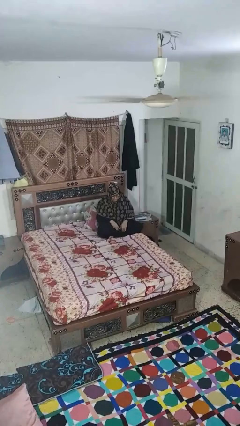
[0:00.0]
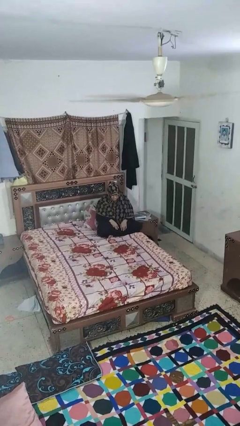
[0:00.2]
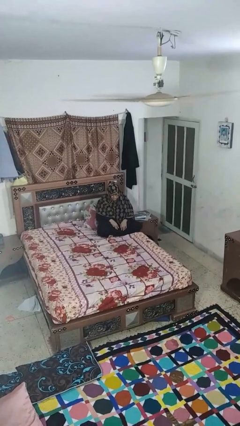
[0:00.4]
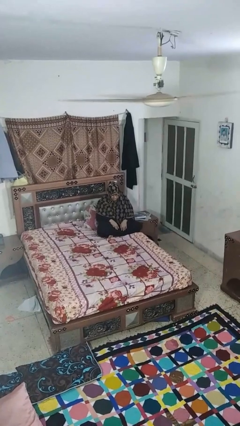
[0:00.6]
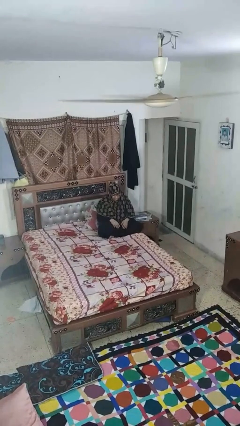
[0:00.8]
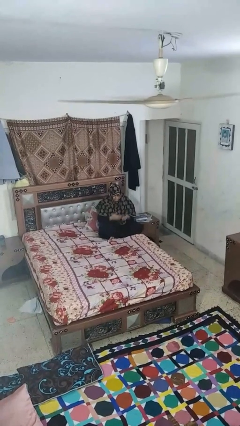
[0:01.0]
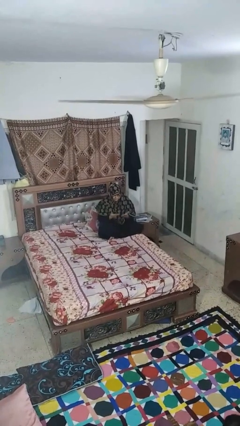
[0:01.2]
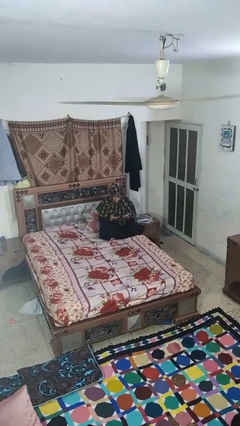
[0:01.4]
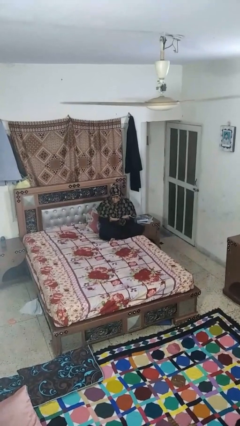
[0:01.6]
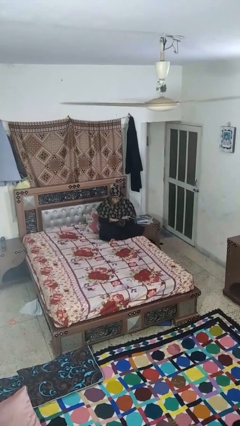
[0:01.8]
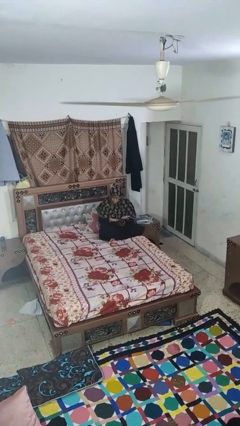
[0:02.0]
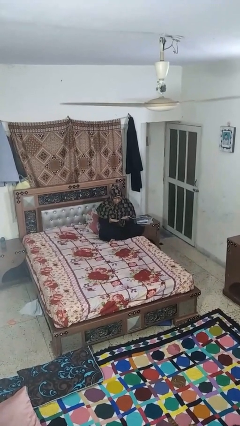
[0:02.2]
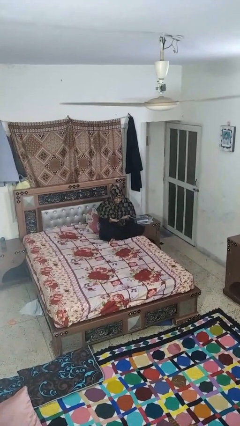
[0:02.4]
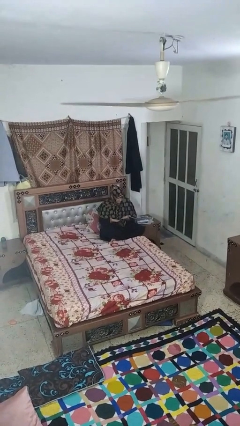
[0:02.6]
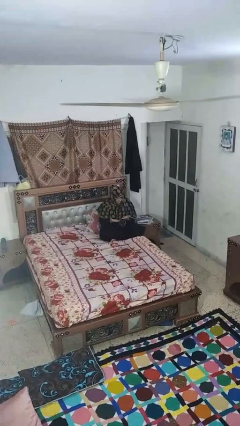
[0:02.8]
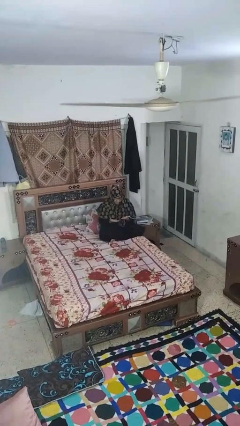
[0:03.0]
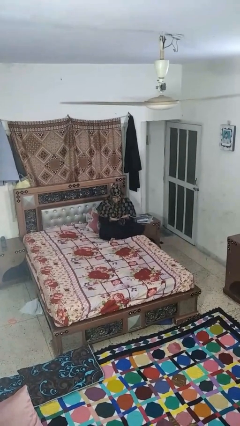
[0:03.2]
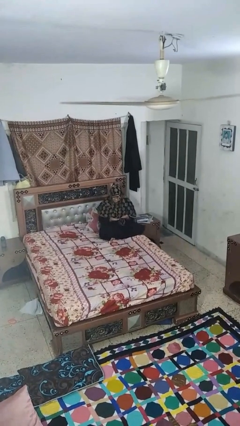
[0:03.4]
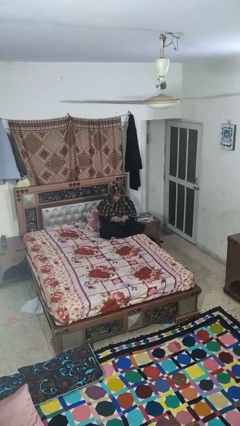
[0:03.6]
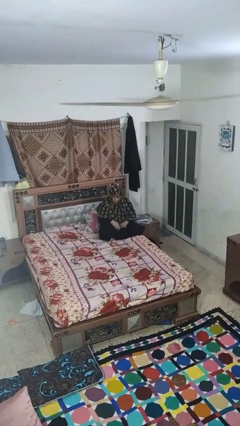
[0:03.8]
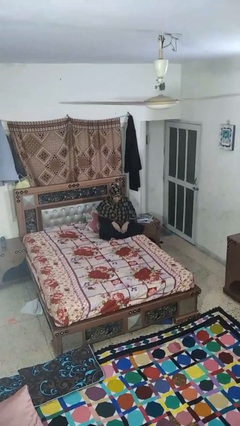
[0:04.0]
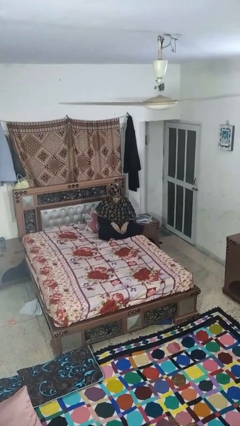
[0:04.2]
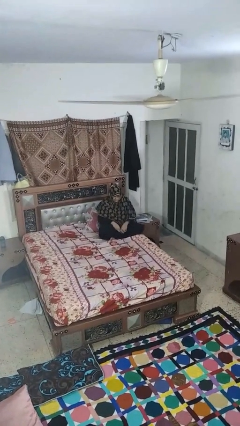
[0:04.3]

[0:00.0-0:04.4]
person looks at hands in lap

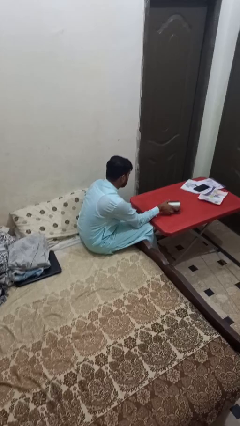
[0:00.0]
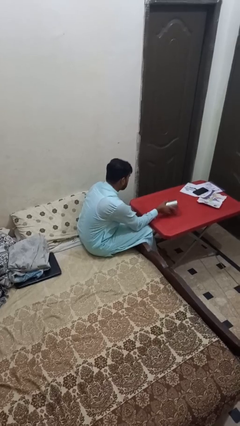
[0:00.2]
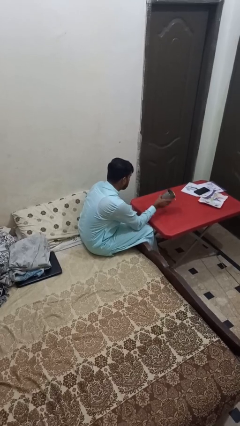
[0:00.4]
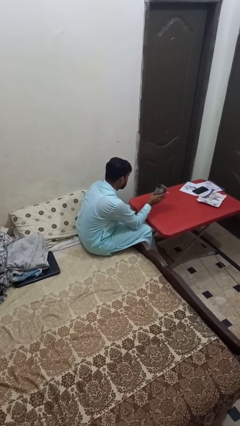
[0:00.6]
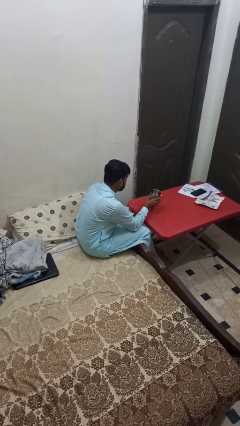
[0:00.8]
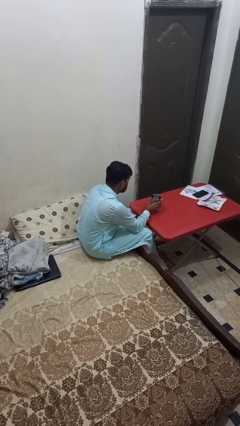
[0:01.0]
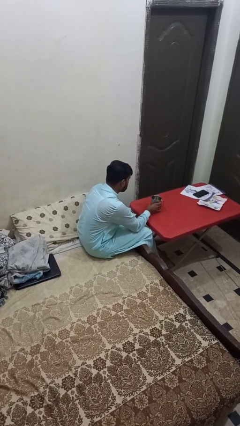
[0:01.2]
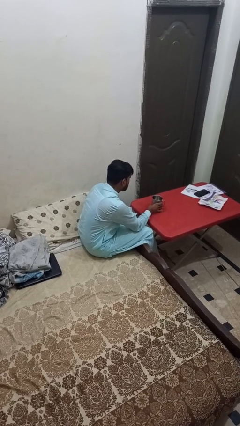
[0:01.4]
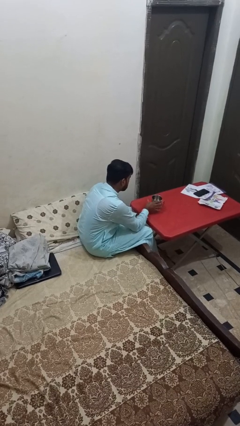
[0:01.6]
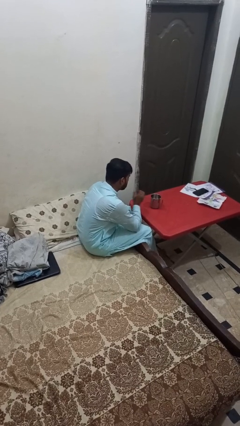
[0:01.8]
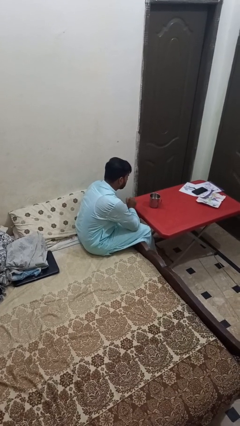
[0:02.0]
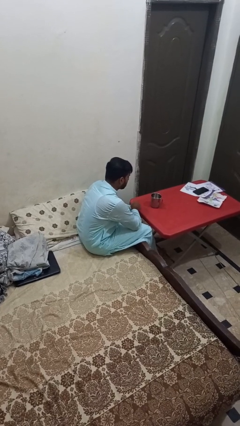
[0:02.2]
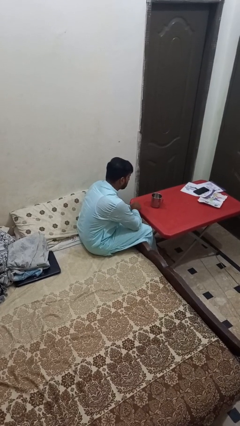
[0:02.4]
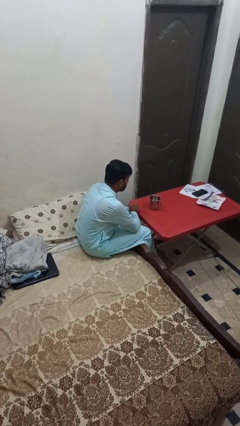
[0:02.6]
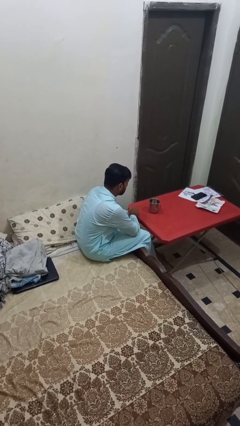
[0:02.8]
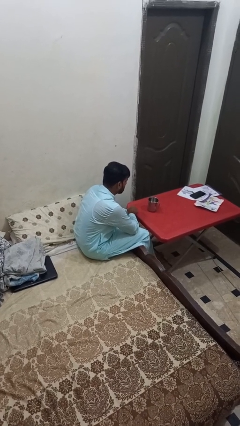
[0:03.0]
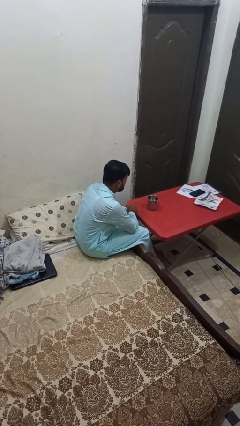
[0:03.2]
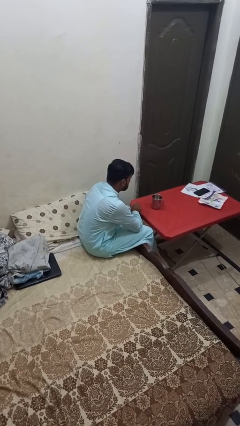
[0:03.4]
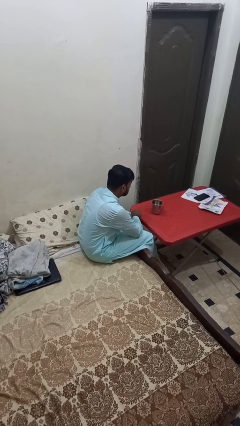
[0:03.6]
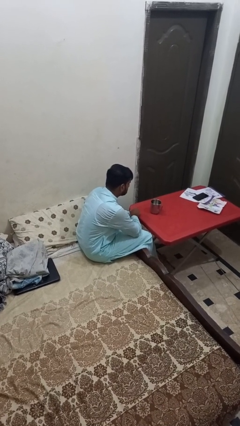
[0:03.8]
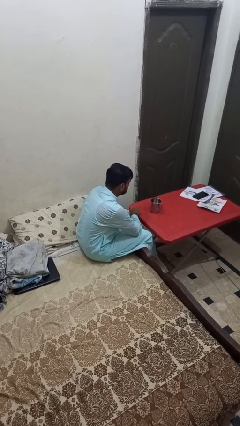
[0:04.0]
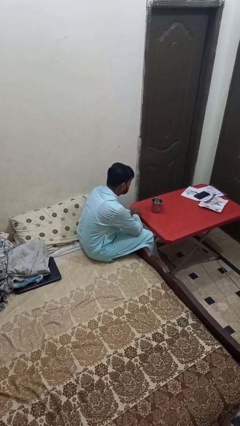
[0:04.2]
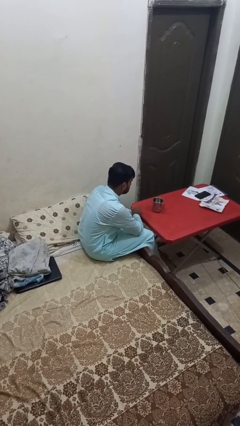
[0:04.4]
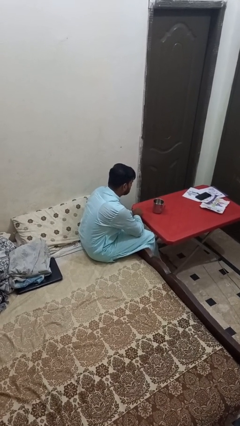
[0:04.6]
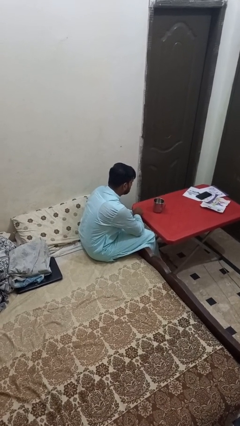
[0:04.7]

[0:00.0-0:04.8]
person sets upright glass

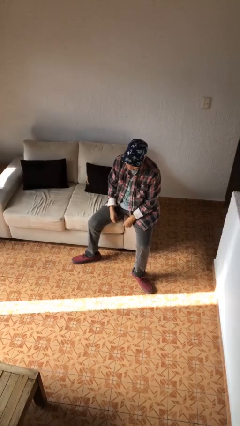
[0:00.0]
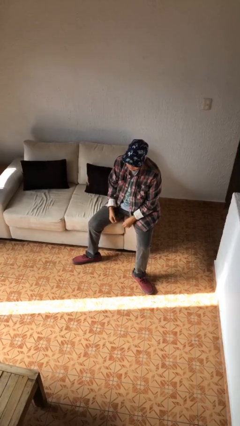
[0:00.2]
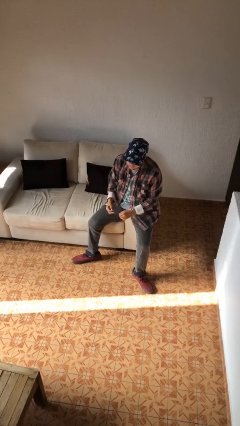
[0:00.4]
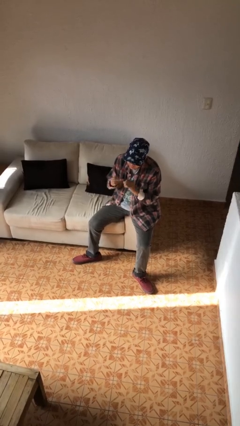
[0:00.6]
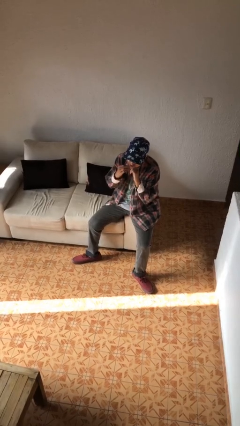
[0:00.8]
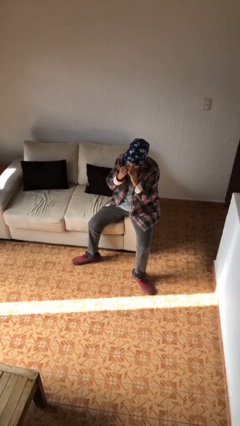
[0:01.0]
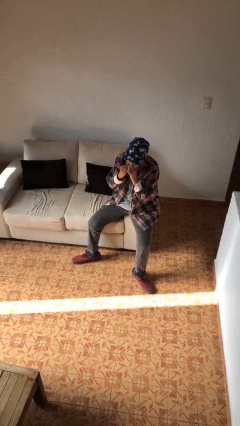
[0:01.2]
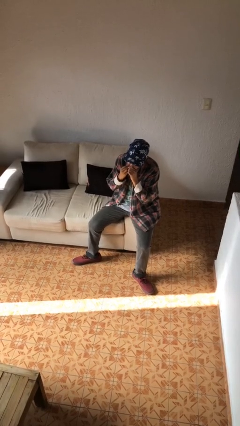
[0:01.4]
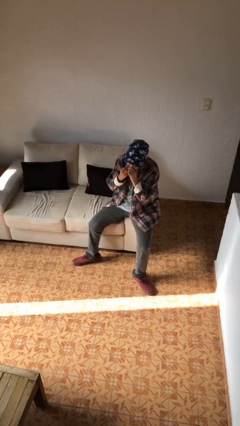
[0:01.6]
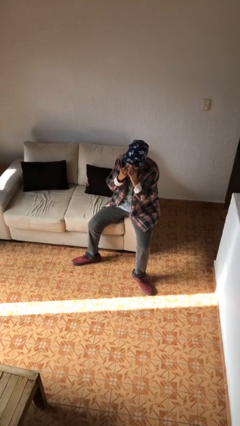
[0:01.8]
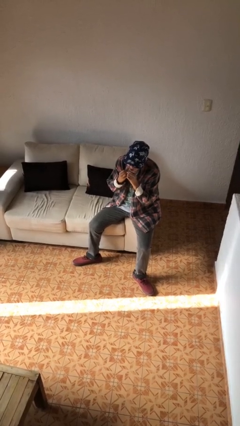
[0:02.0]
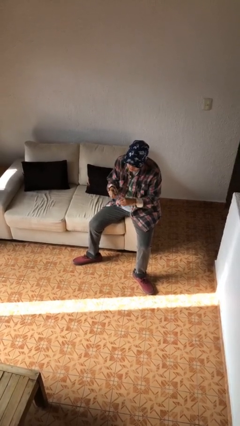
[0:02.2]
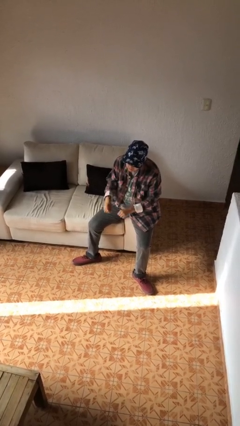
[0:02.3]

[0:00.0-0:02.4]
person flosses

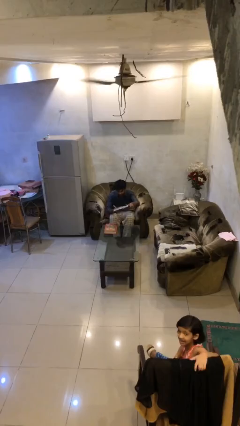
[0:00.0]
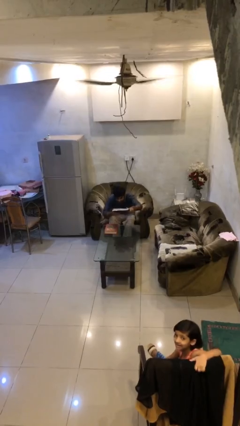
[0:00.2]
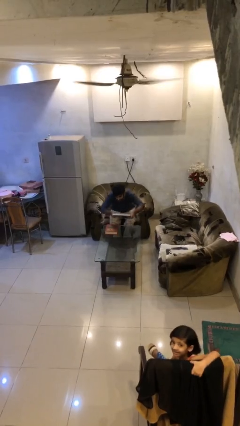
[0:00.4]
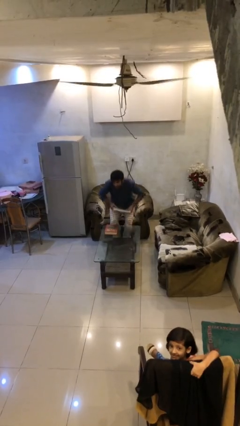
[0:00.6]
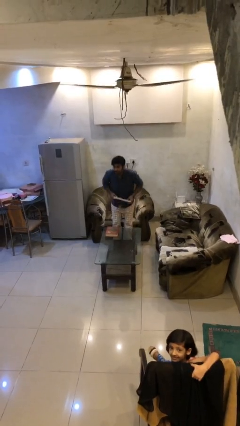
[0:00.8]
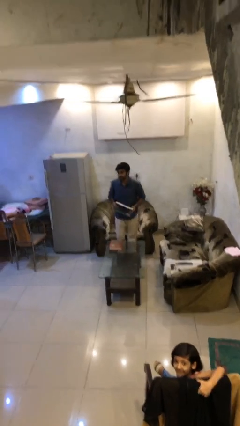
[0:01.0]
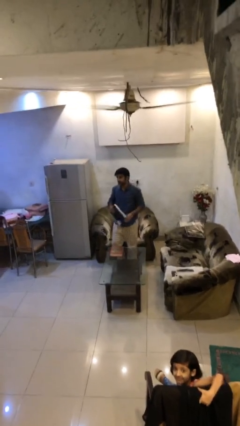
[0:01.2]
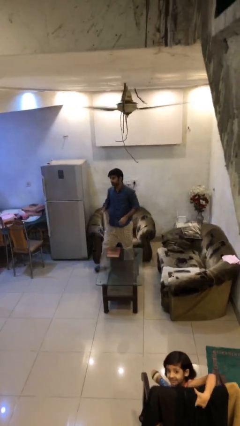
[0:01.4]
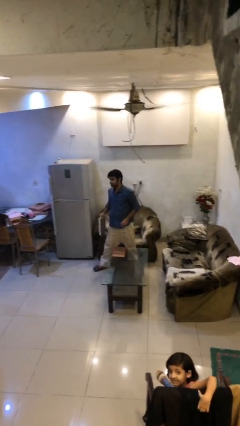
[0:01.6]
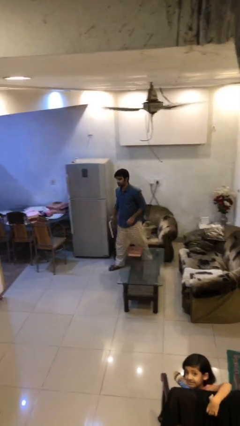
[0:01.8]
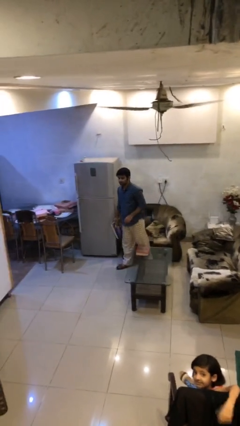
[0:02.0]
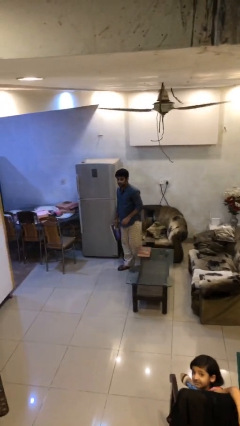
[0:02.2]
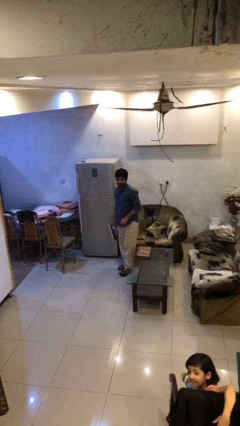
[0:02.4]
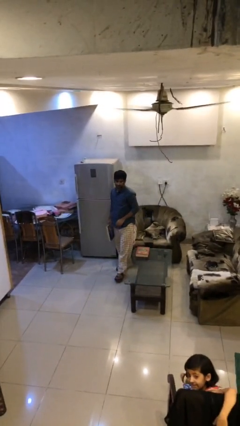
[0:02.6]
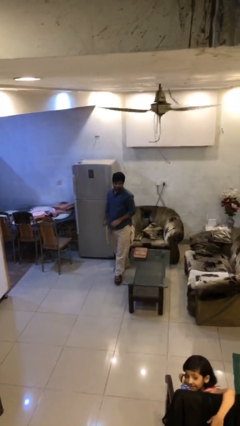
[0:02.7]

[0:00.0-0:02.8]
person stands up

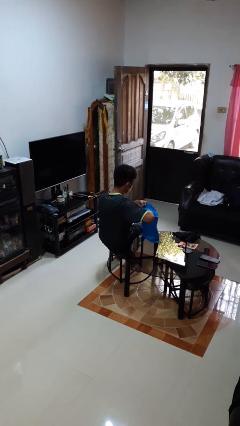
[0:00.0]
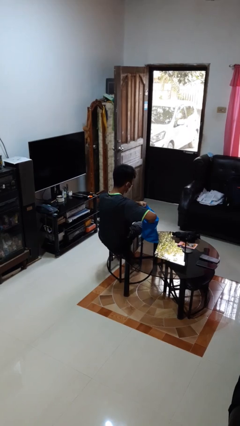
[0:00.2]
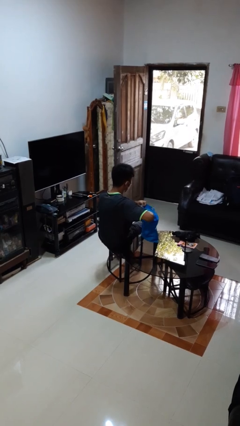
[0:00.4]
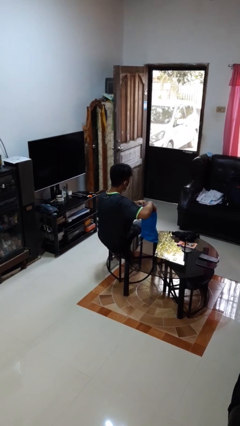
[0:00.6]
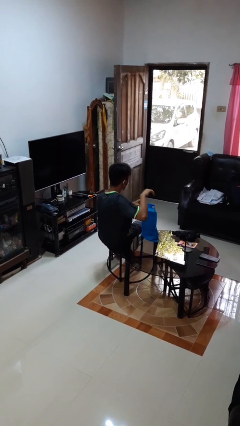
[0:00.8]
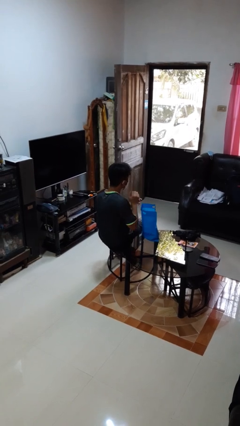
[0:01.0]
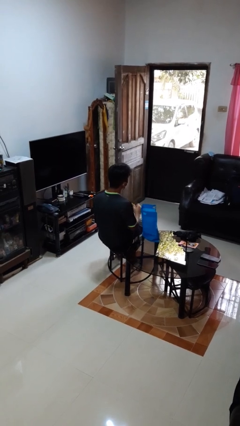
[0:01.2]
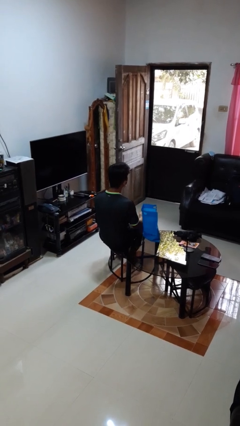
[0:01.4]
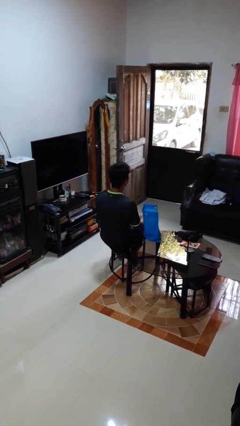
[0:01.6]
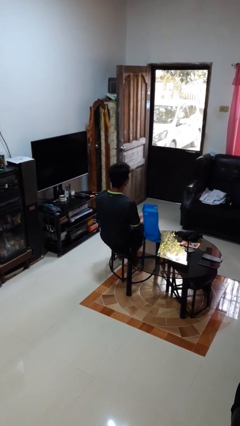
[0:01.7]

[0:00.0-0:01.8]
person puts object into bag

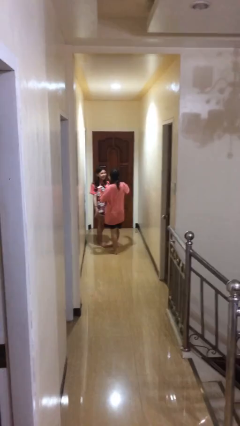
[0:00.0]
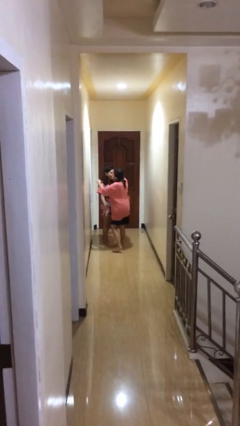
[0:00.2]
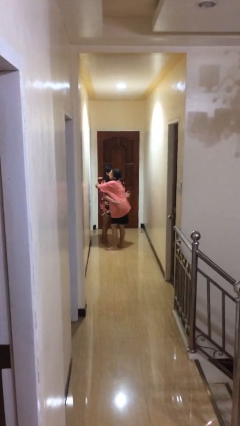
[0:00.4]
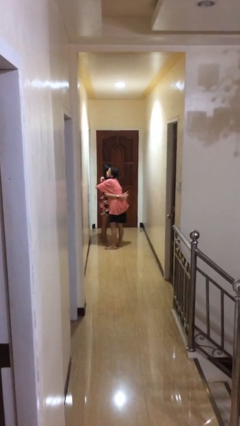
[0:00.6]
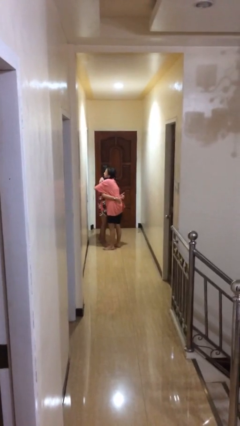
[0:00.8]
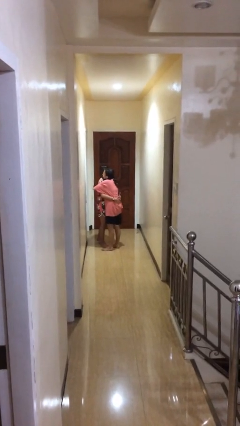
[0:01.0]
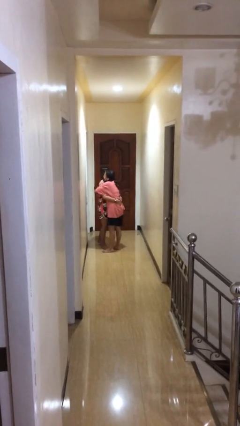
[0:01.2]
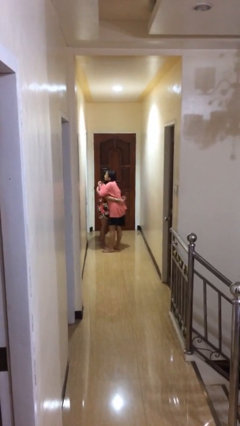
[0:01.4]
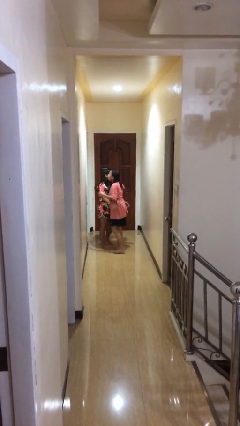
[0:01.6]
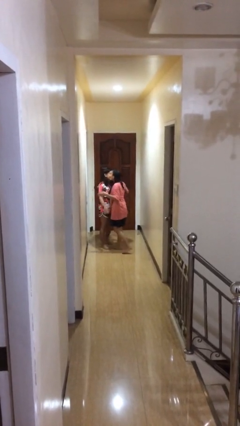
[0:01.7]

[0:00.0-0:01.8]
person embraces person
